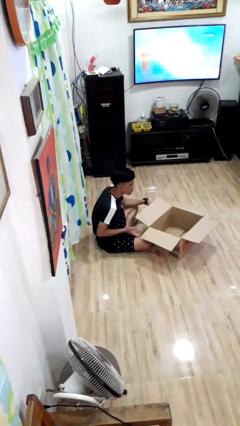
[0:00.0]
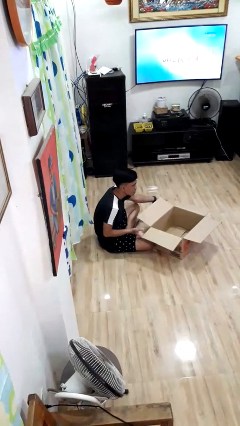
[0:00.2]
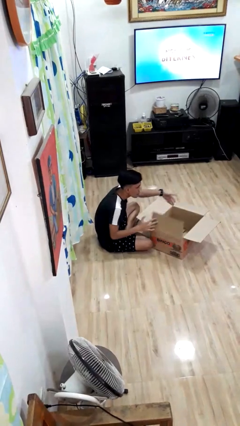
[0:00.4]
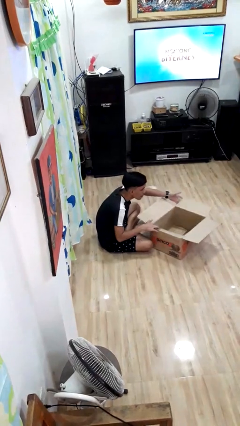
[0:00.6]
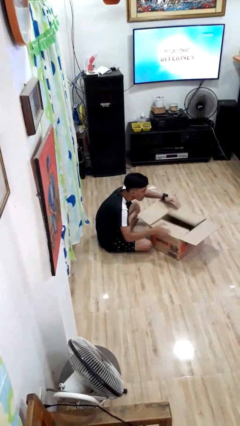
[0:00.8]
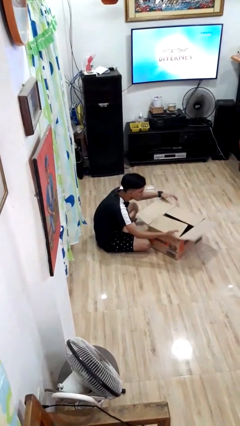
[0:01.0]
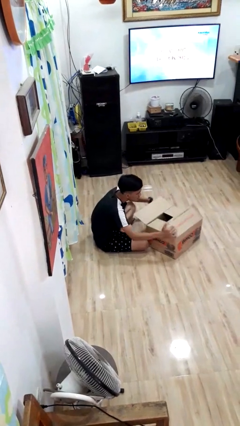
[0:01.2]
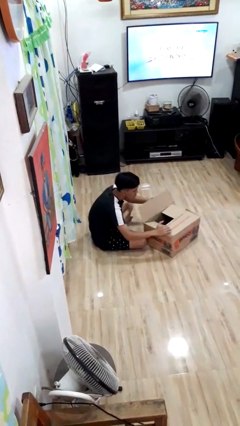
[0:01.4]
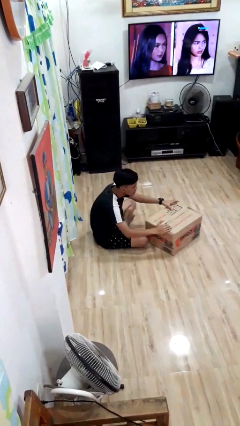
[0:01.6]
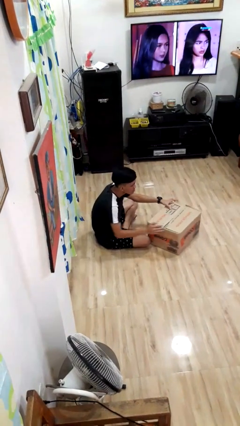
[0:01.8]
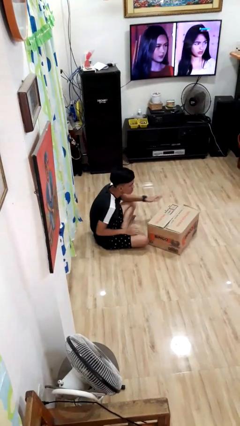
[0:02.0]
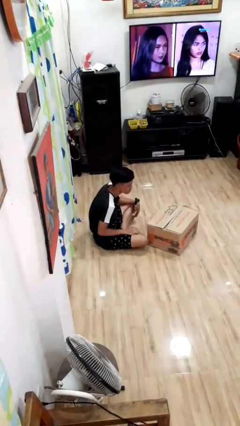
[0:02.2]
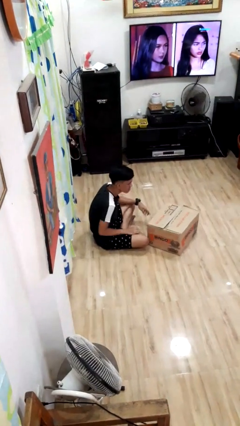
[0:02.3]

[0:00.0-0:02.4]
person closes box

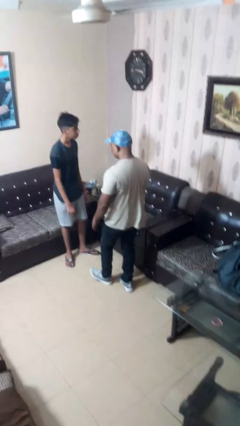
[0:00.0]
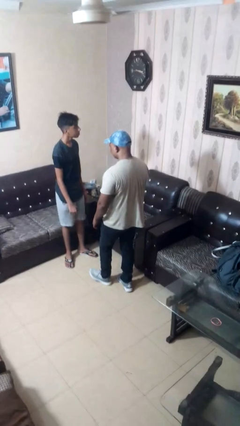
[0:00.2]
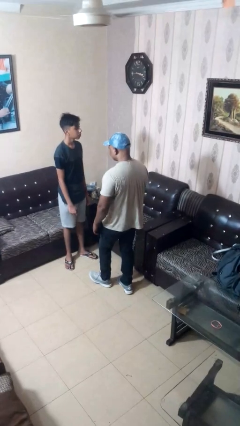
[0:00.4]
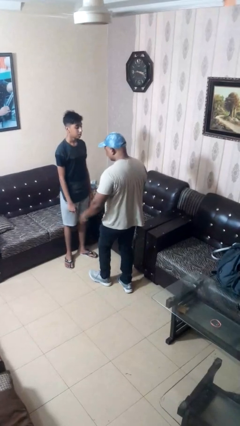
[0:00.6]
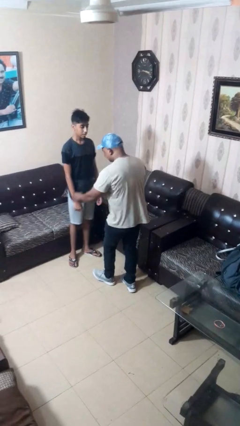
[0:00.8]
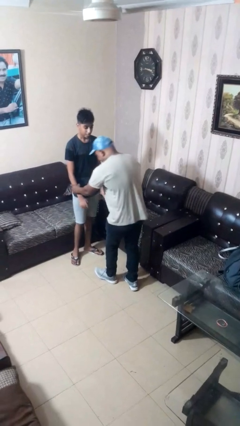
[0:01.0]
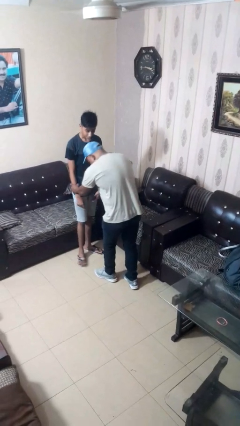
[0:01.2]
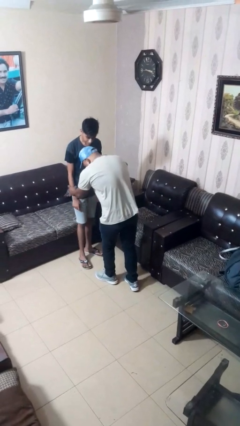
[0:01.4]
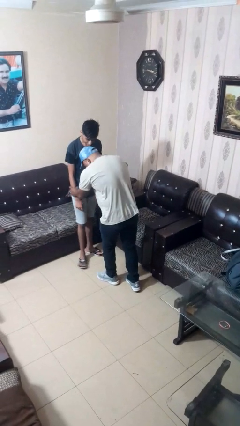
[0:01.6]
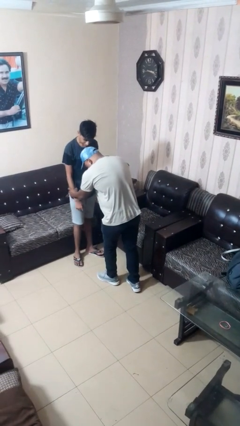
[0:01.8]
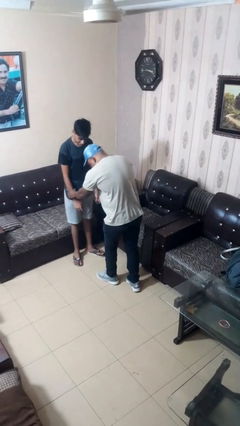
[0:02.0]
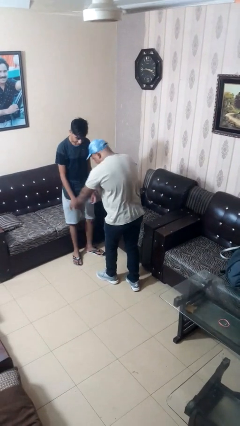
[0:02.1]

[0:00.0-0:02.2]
person grabs person by forearm

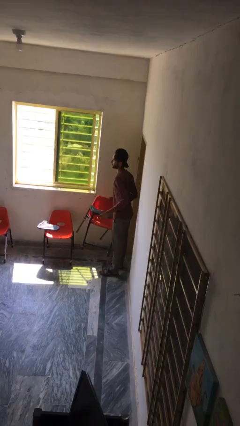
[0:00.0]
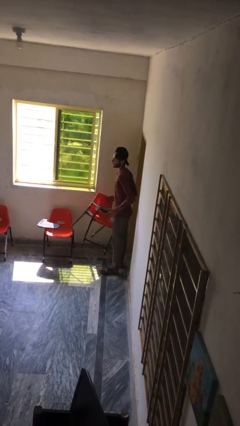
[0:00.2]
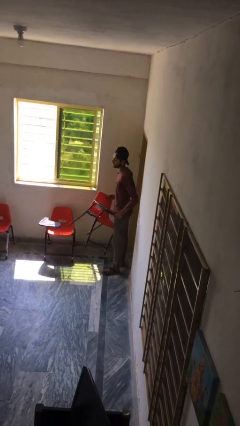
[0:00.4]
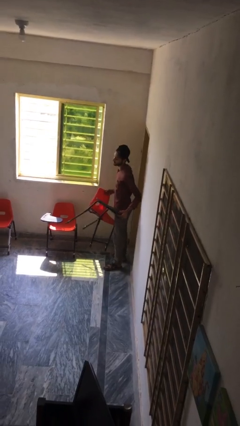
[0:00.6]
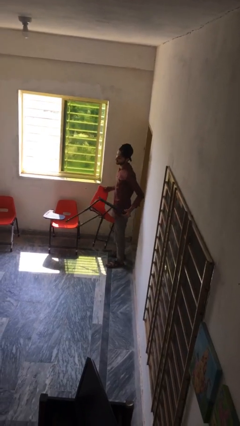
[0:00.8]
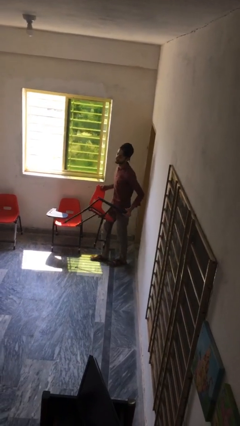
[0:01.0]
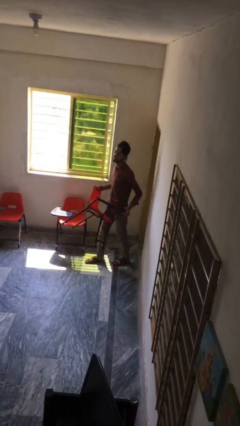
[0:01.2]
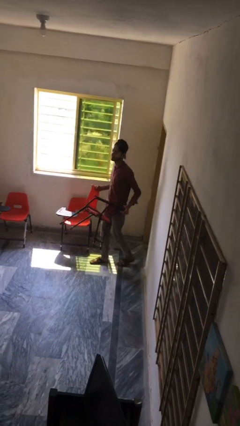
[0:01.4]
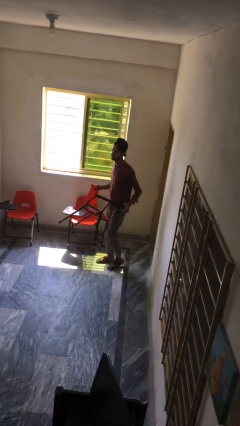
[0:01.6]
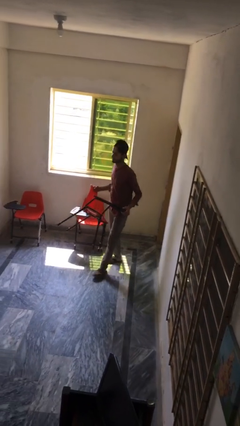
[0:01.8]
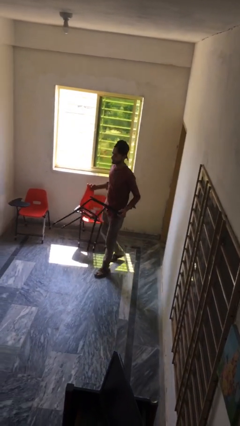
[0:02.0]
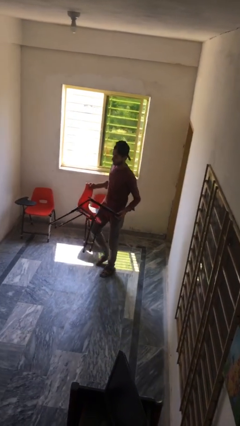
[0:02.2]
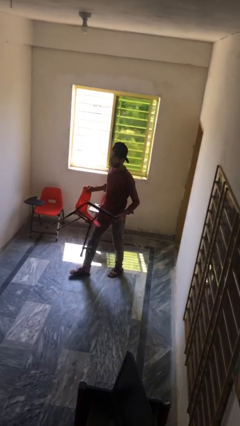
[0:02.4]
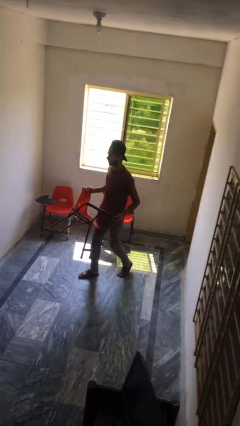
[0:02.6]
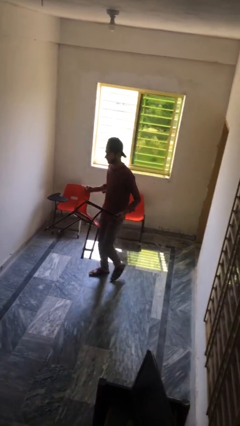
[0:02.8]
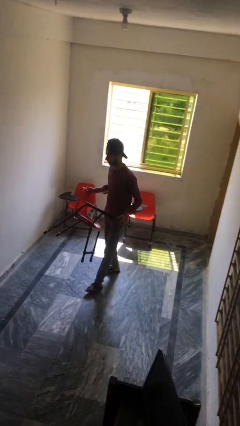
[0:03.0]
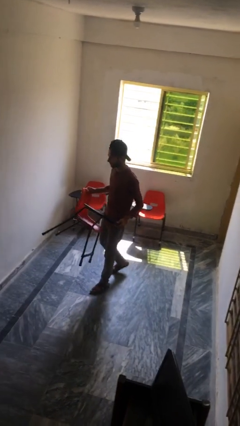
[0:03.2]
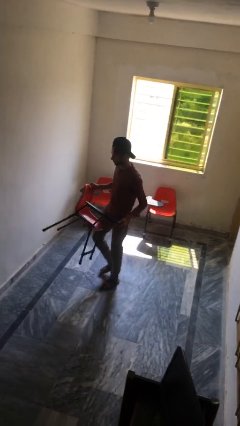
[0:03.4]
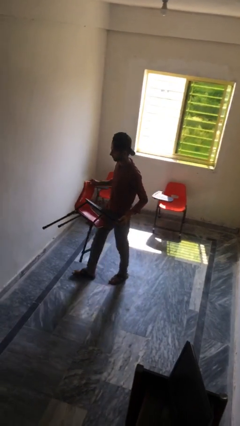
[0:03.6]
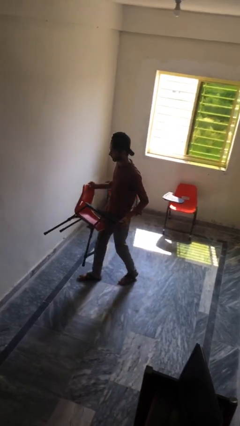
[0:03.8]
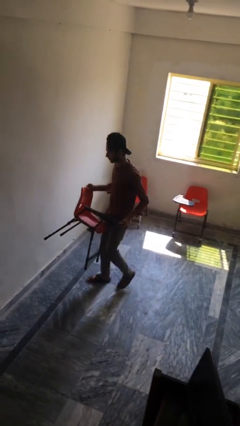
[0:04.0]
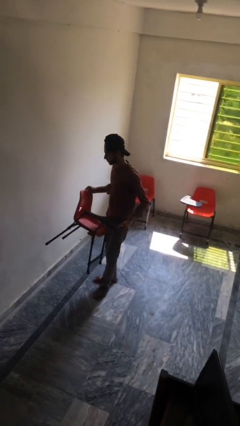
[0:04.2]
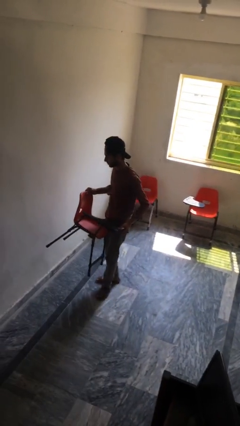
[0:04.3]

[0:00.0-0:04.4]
person carries heavy object

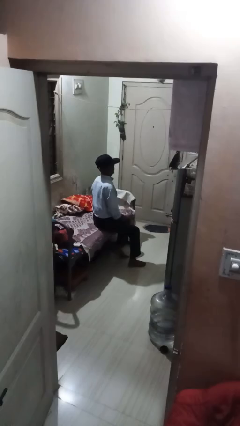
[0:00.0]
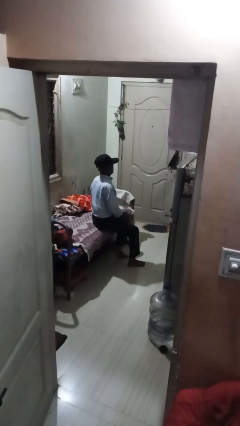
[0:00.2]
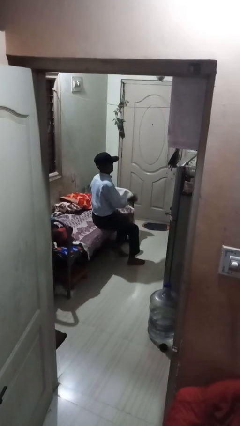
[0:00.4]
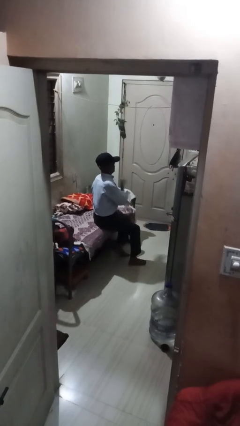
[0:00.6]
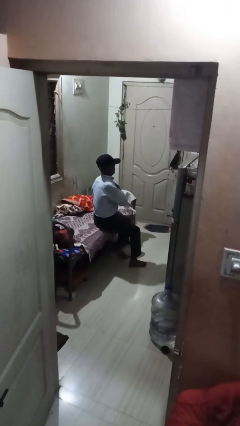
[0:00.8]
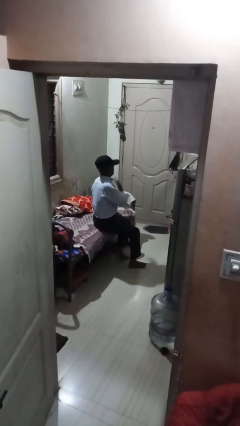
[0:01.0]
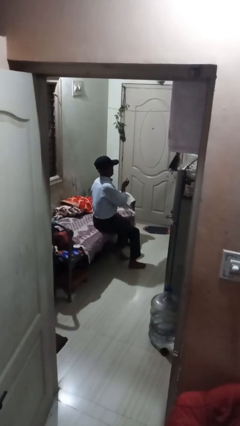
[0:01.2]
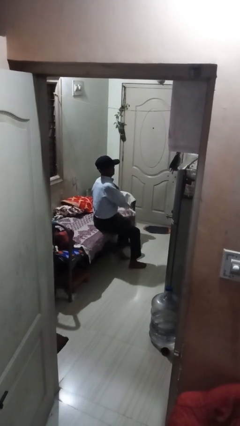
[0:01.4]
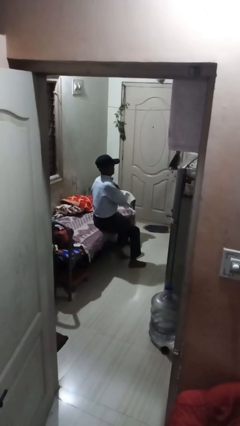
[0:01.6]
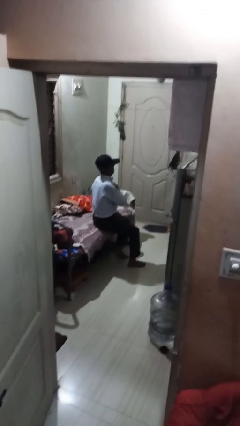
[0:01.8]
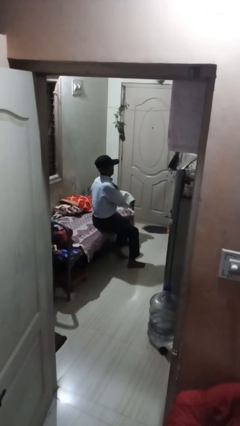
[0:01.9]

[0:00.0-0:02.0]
person drums on chest

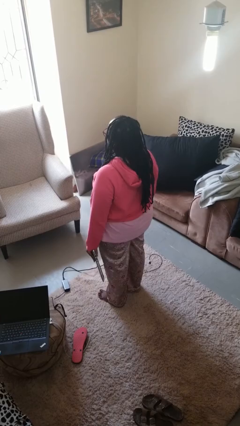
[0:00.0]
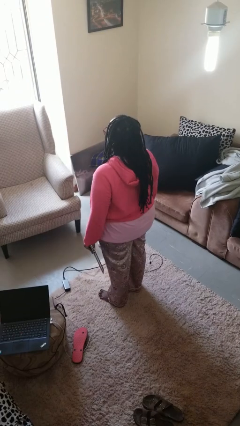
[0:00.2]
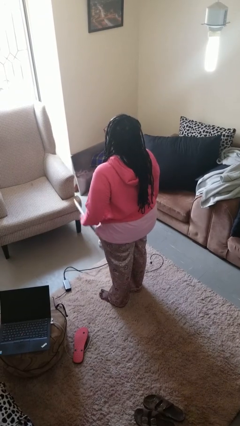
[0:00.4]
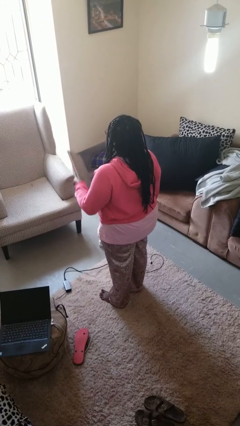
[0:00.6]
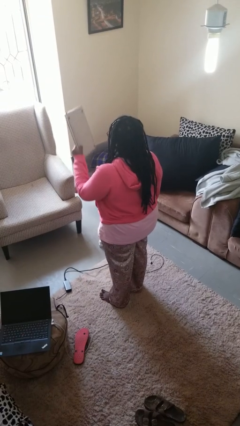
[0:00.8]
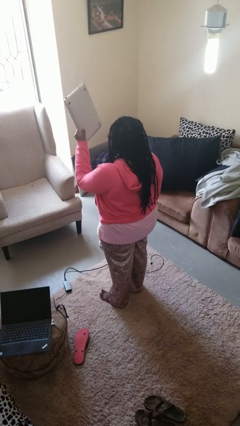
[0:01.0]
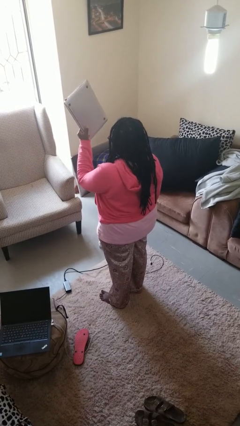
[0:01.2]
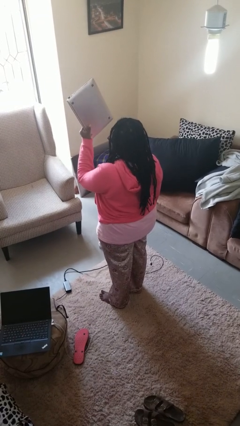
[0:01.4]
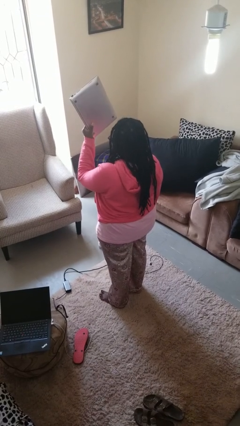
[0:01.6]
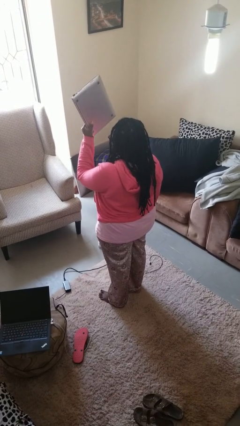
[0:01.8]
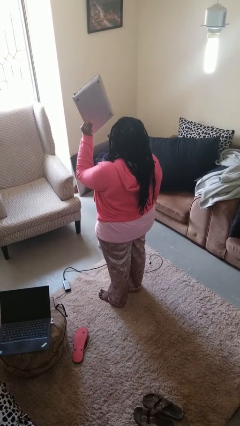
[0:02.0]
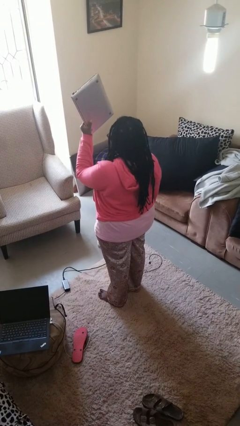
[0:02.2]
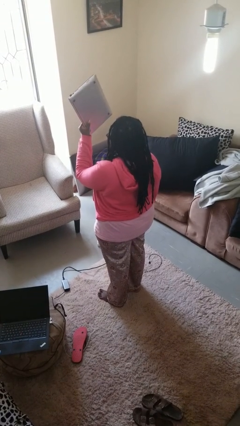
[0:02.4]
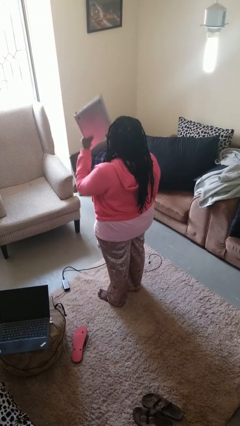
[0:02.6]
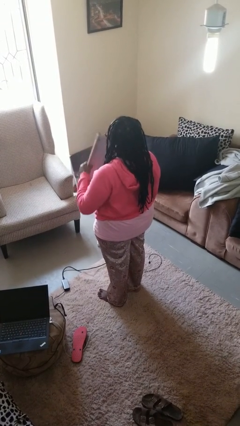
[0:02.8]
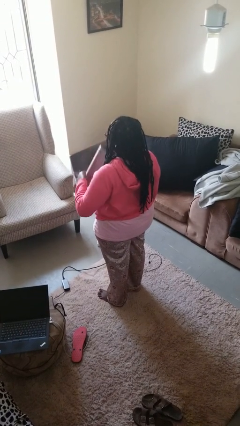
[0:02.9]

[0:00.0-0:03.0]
person holds object above head

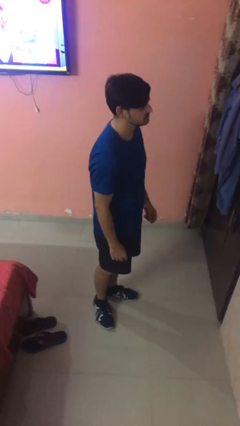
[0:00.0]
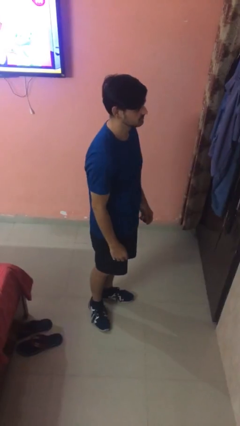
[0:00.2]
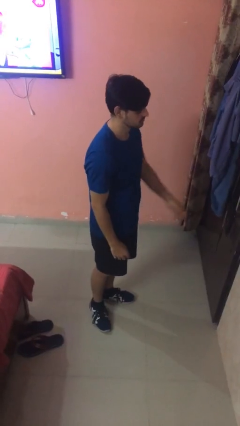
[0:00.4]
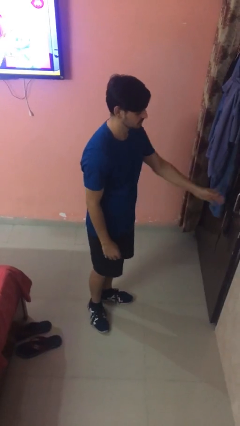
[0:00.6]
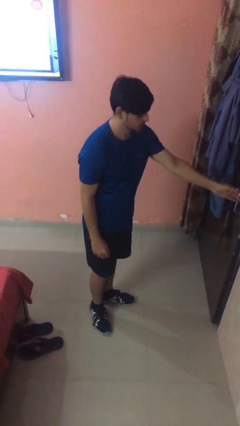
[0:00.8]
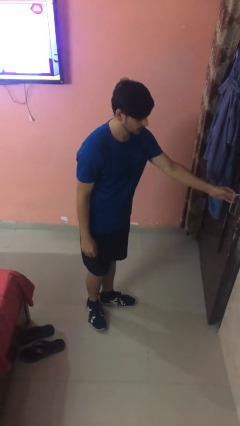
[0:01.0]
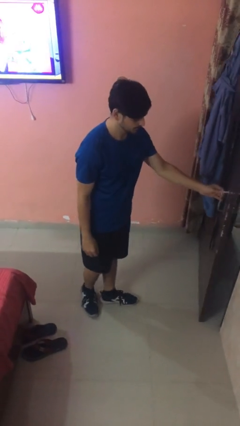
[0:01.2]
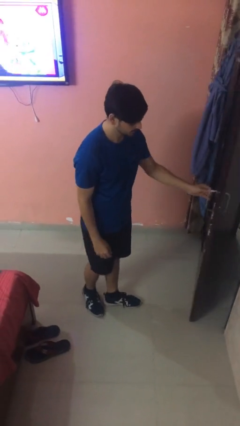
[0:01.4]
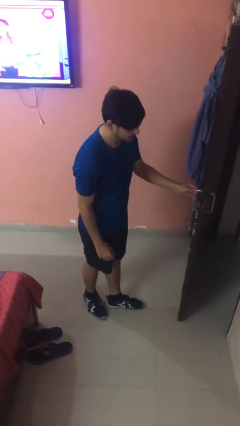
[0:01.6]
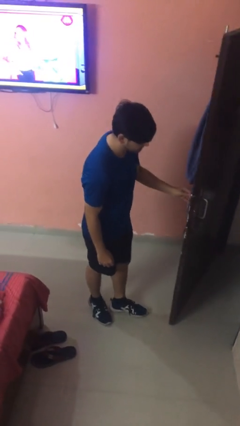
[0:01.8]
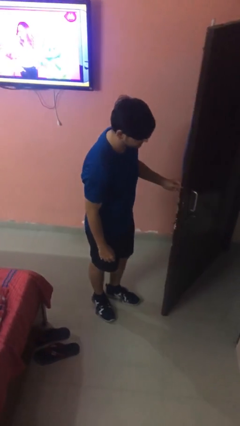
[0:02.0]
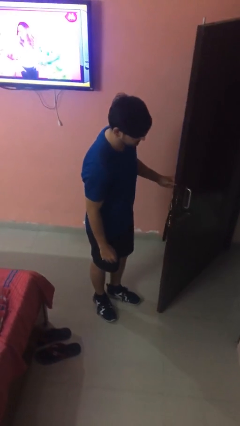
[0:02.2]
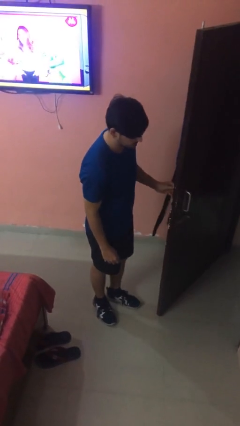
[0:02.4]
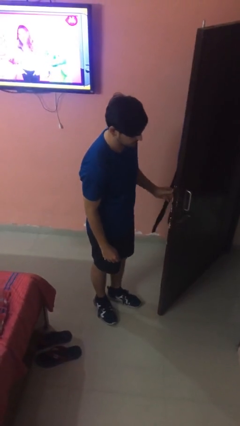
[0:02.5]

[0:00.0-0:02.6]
person opens facility door

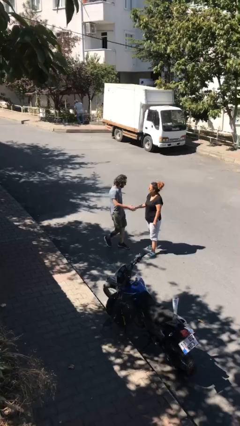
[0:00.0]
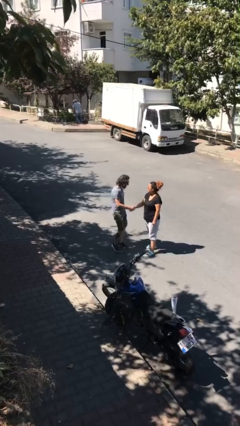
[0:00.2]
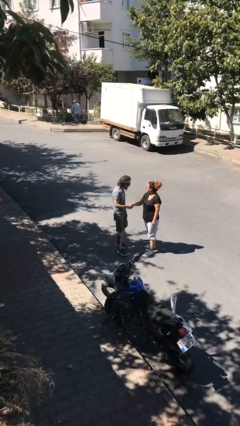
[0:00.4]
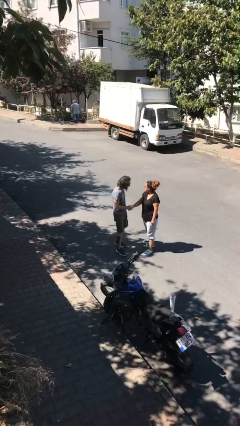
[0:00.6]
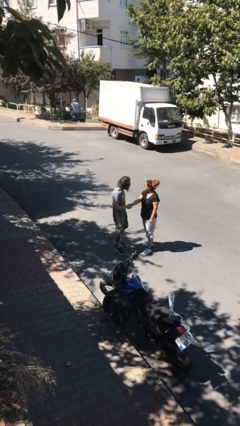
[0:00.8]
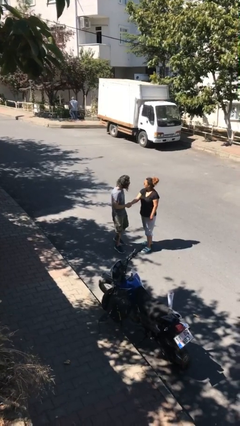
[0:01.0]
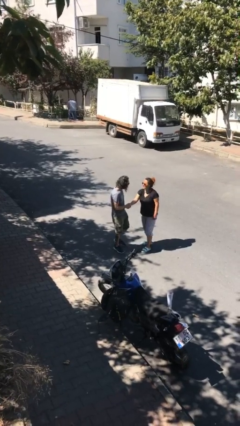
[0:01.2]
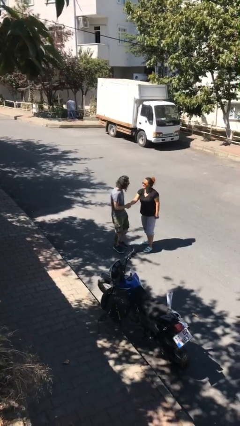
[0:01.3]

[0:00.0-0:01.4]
person shakes hand
